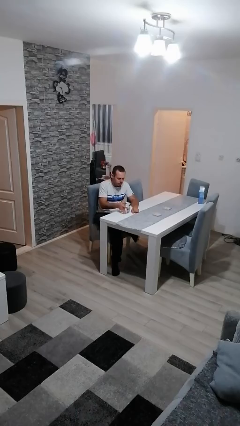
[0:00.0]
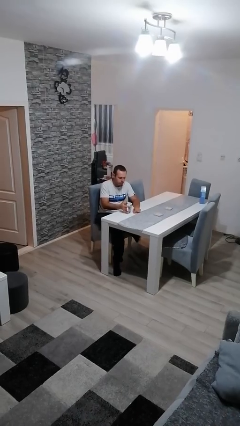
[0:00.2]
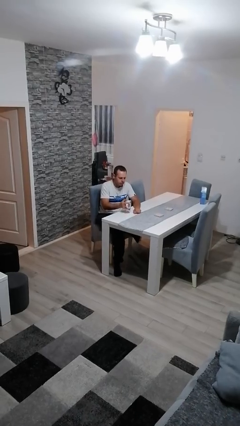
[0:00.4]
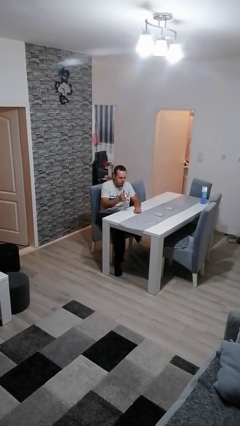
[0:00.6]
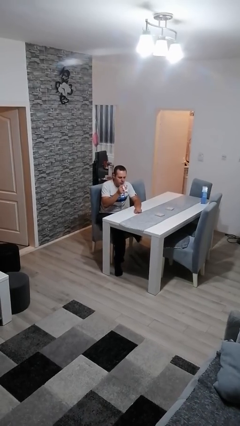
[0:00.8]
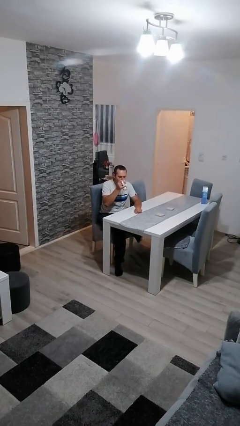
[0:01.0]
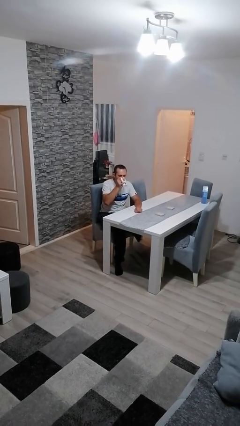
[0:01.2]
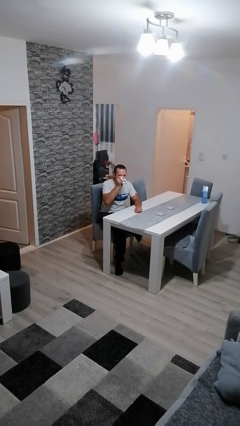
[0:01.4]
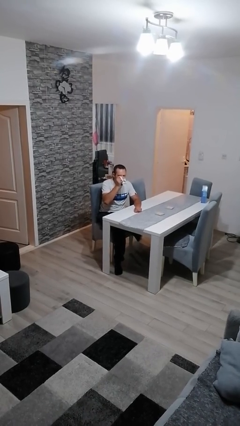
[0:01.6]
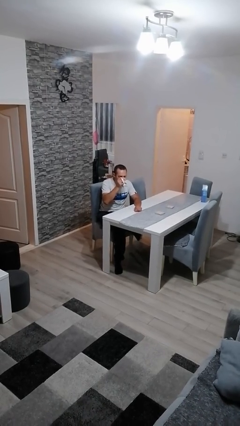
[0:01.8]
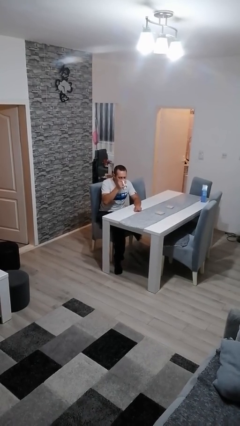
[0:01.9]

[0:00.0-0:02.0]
person drinks from mug

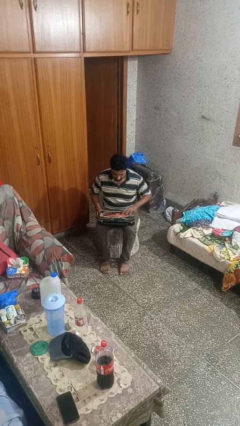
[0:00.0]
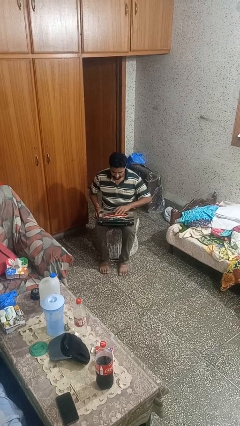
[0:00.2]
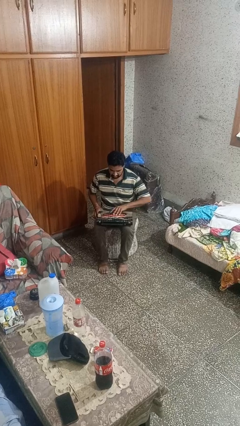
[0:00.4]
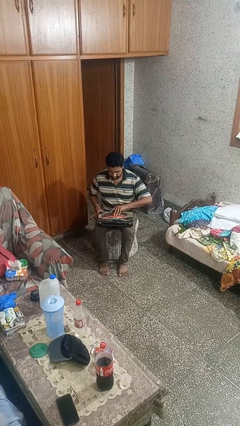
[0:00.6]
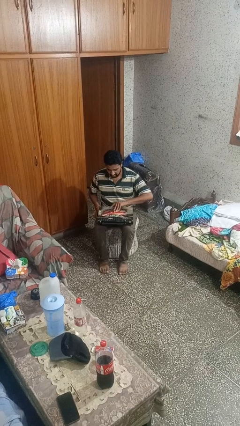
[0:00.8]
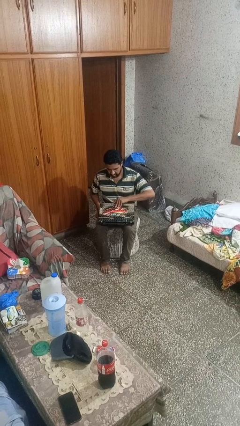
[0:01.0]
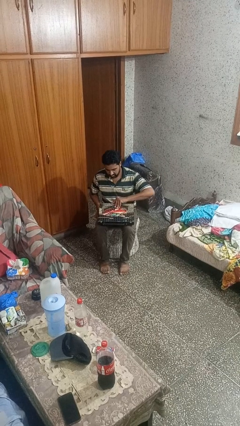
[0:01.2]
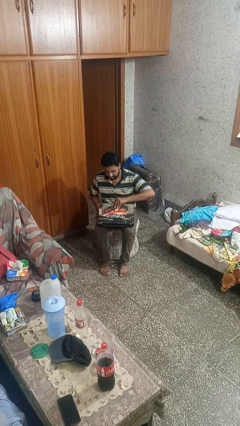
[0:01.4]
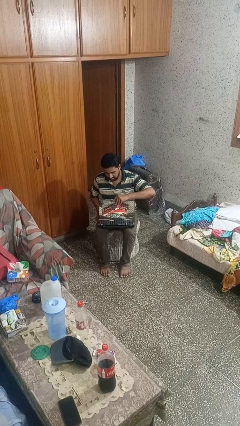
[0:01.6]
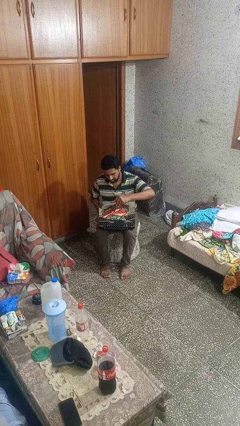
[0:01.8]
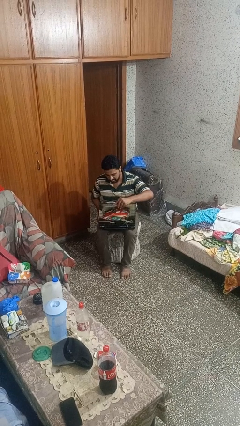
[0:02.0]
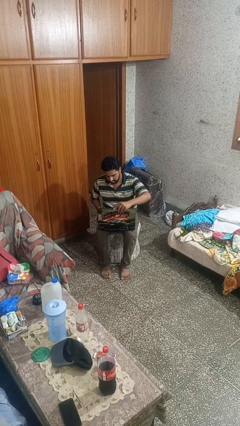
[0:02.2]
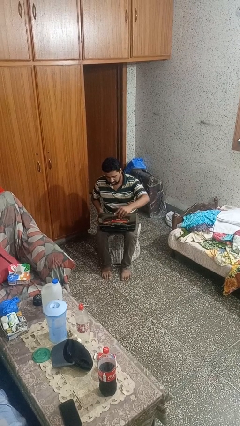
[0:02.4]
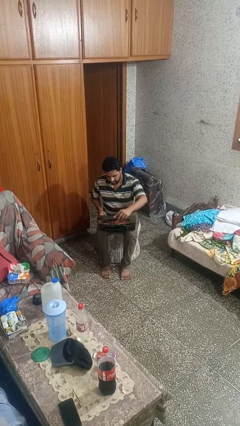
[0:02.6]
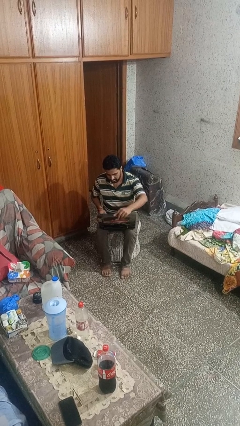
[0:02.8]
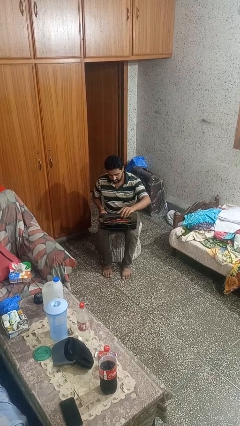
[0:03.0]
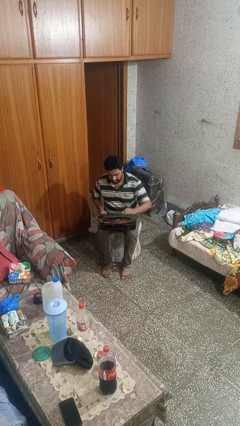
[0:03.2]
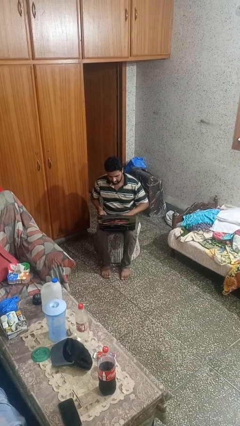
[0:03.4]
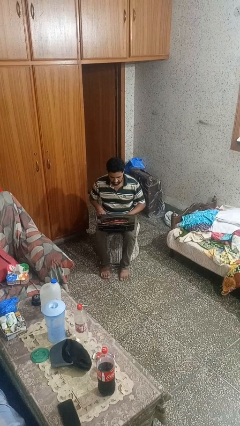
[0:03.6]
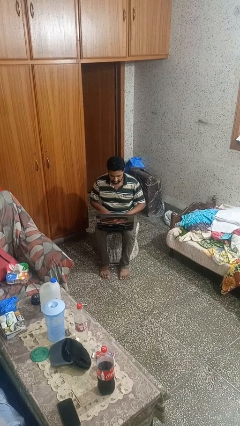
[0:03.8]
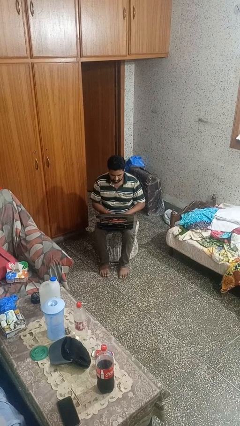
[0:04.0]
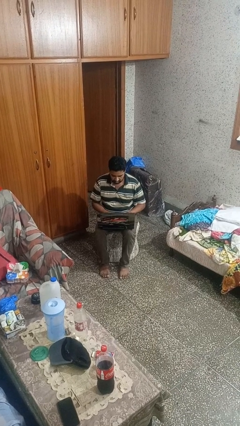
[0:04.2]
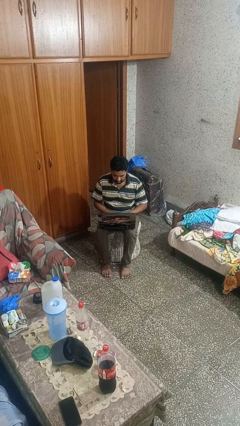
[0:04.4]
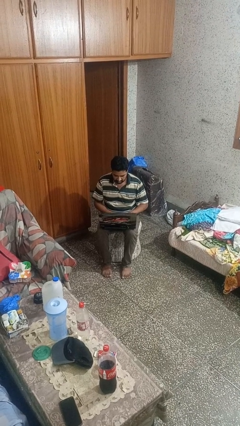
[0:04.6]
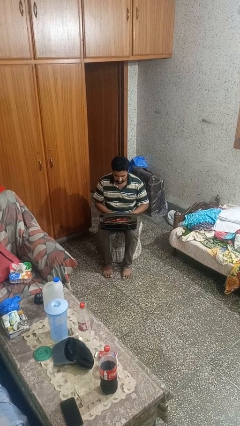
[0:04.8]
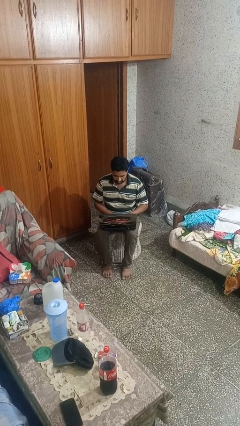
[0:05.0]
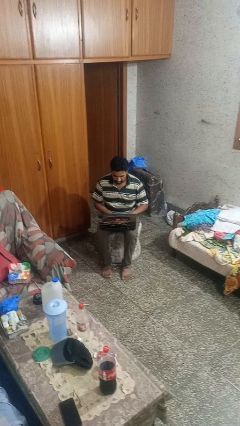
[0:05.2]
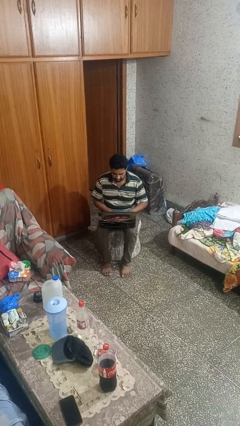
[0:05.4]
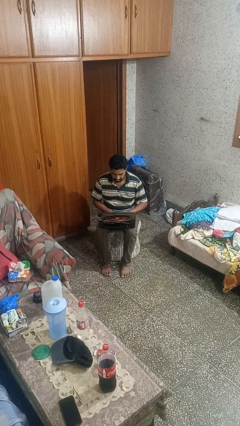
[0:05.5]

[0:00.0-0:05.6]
person opens laptop

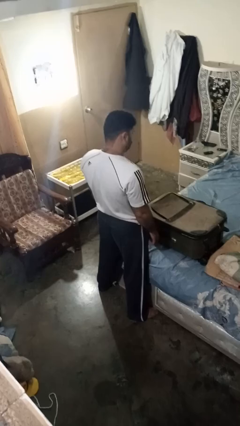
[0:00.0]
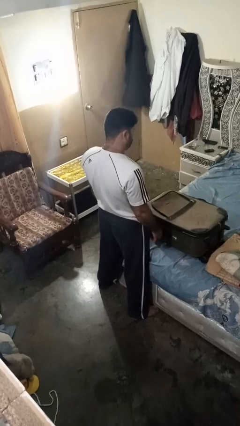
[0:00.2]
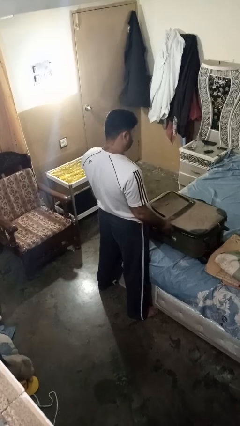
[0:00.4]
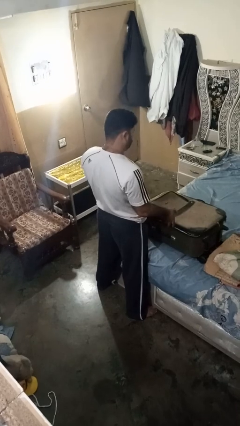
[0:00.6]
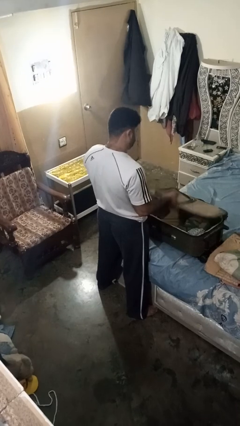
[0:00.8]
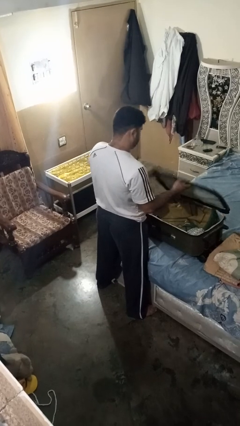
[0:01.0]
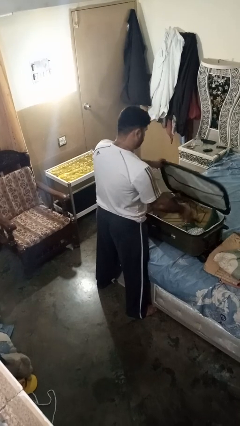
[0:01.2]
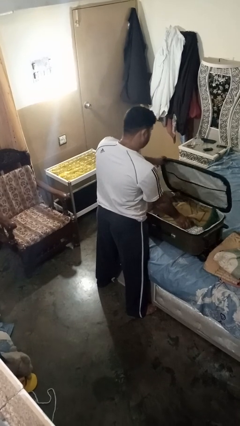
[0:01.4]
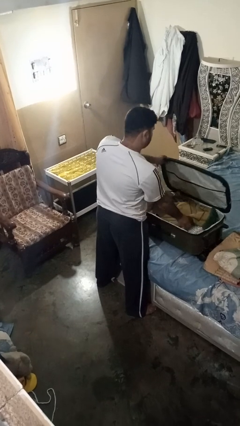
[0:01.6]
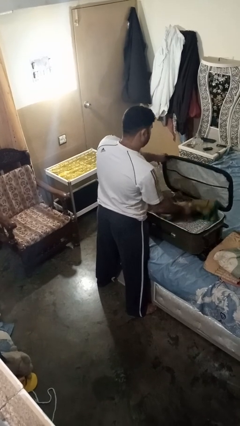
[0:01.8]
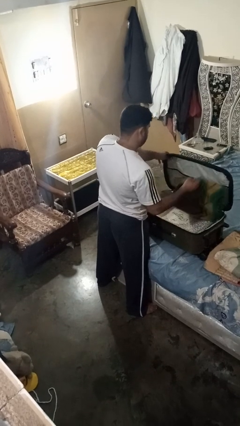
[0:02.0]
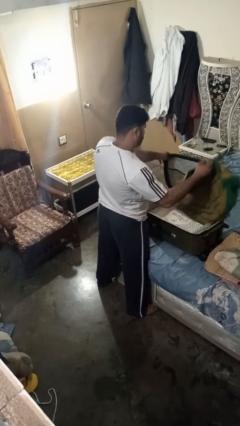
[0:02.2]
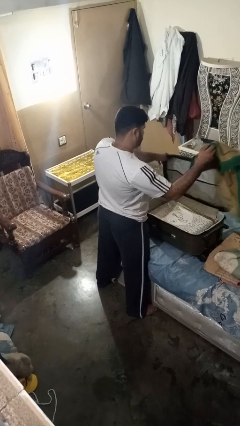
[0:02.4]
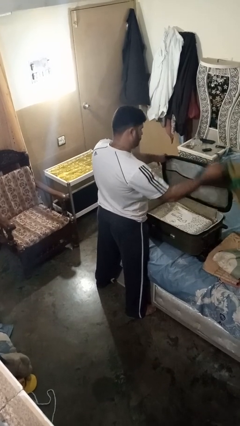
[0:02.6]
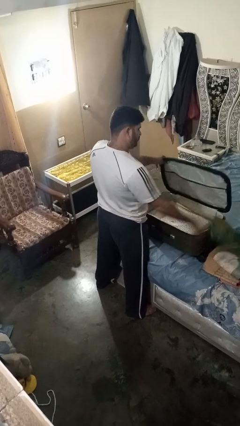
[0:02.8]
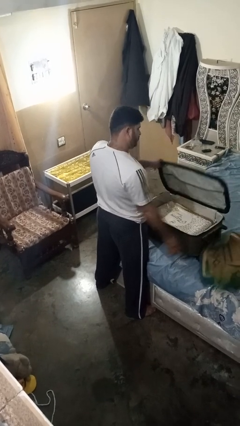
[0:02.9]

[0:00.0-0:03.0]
person unloads clothes from suitcase

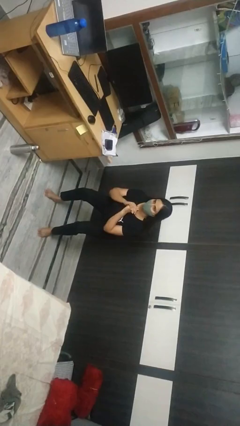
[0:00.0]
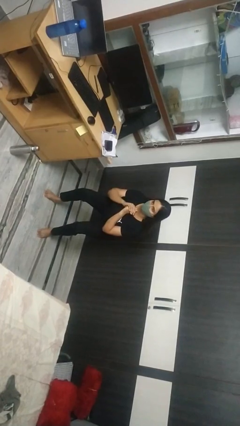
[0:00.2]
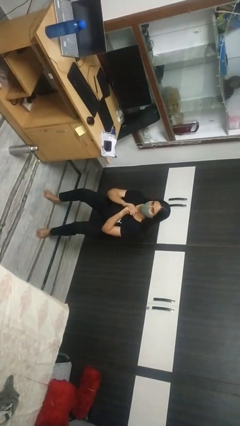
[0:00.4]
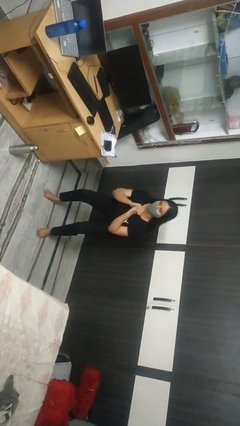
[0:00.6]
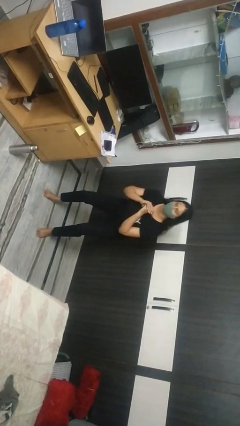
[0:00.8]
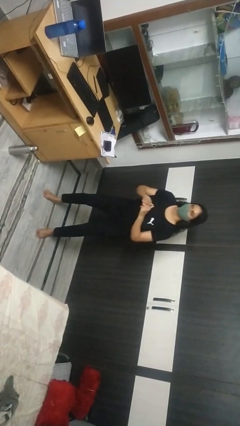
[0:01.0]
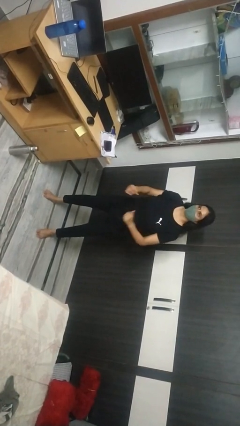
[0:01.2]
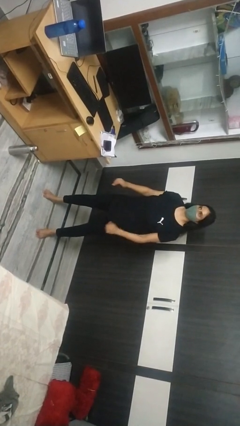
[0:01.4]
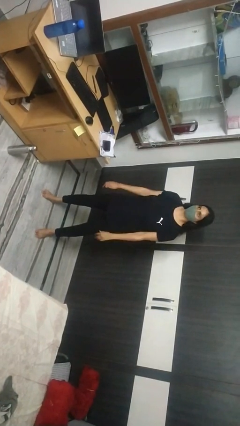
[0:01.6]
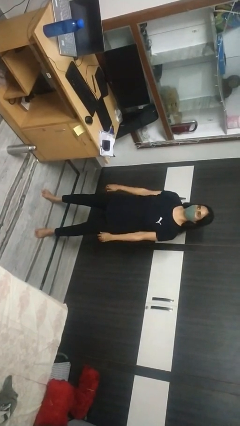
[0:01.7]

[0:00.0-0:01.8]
person stands up

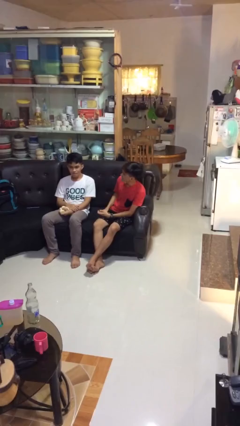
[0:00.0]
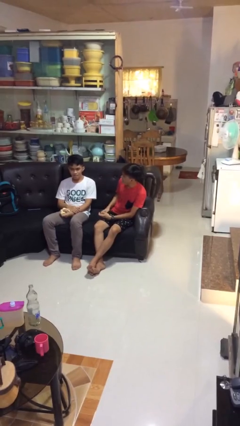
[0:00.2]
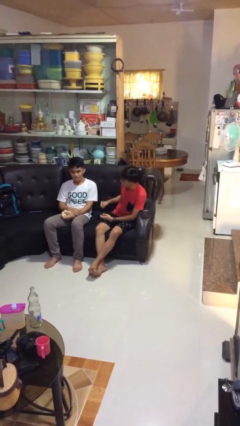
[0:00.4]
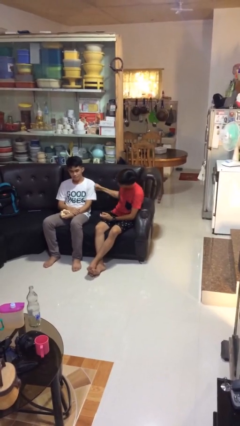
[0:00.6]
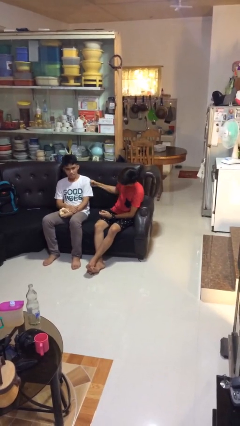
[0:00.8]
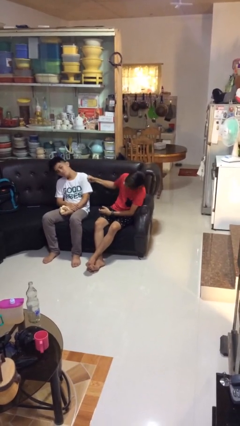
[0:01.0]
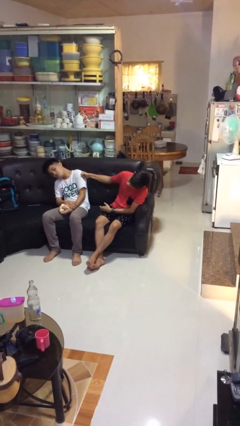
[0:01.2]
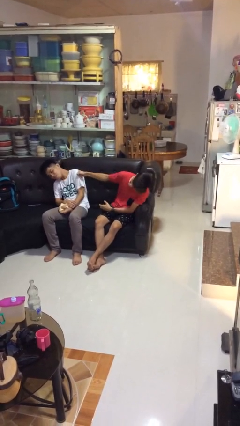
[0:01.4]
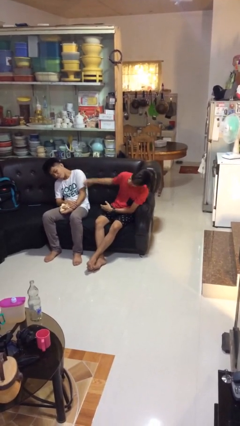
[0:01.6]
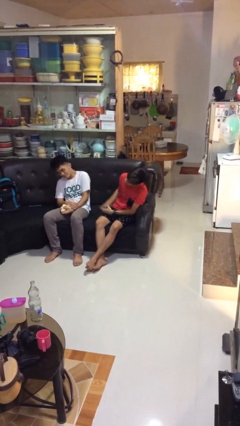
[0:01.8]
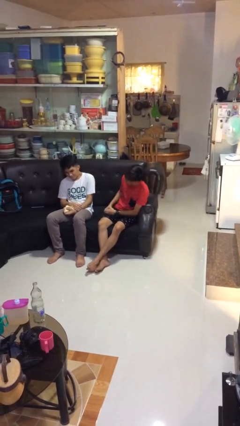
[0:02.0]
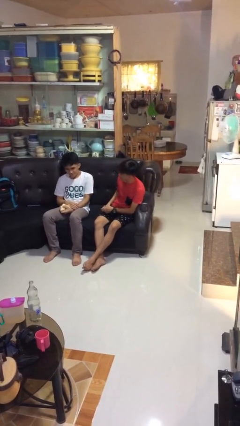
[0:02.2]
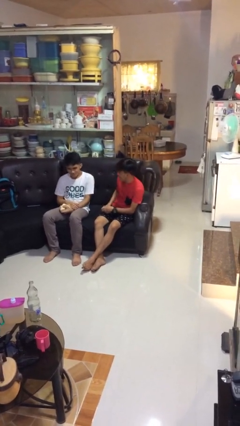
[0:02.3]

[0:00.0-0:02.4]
person pounds shoulders of person

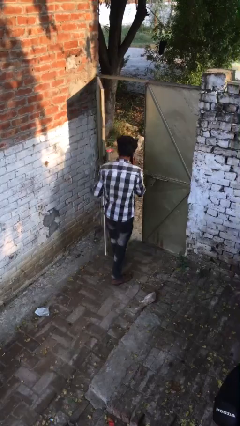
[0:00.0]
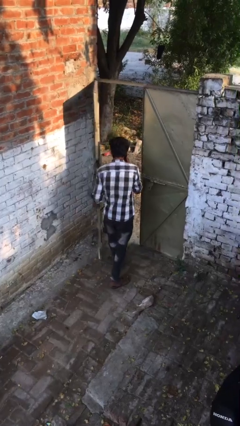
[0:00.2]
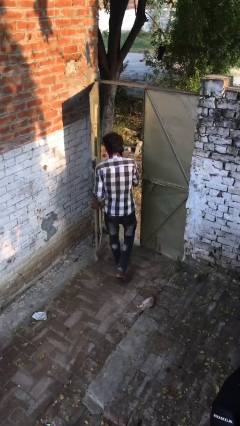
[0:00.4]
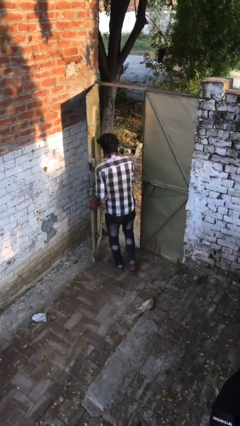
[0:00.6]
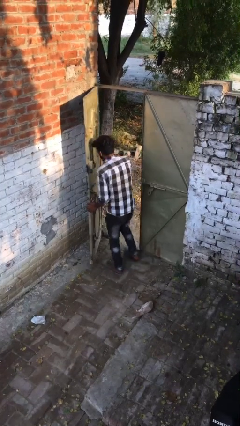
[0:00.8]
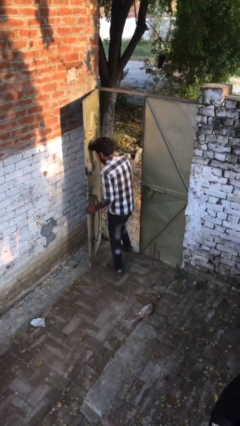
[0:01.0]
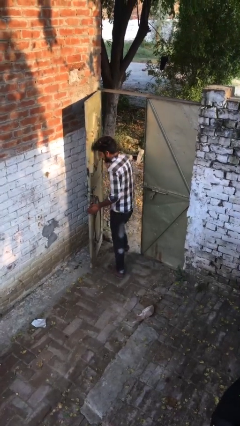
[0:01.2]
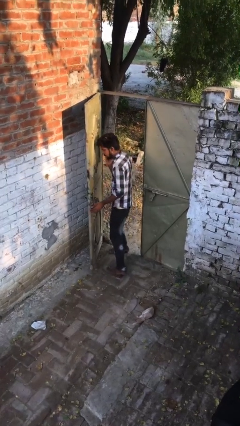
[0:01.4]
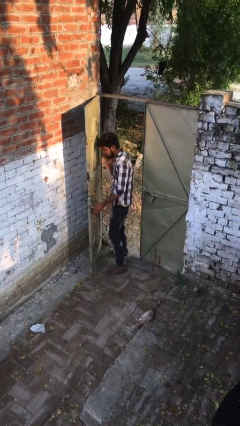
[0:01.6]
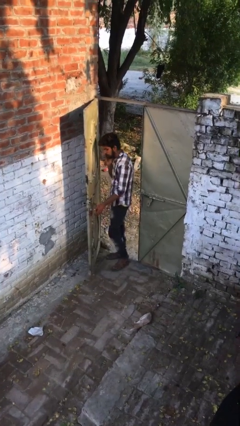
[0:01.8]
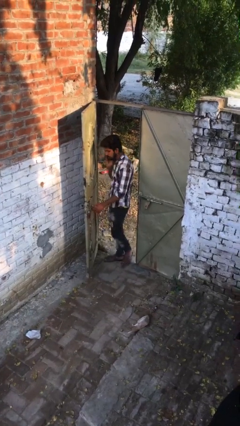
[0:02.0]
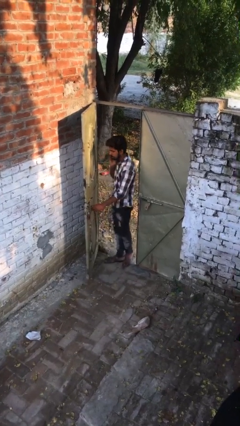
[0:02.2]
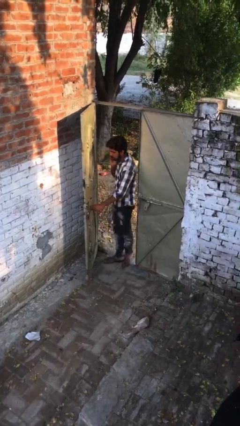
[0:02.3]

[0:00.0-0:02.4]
person exits scene through structure
